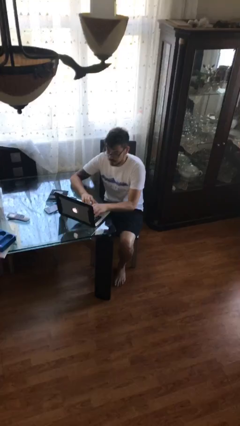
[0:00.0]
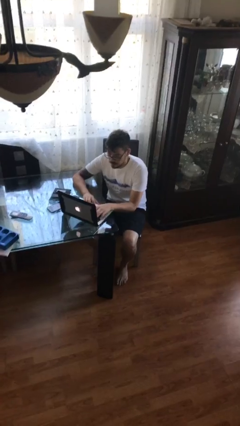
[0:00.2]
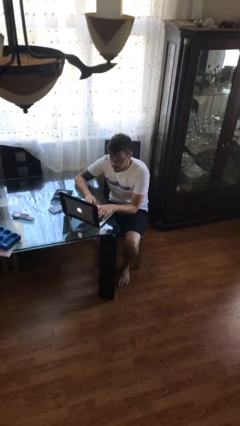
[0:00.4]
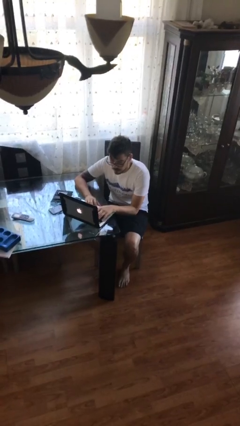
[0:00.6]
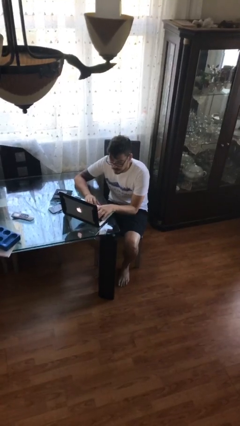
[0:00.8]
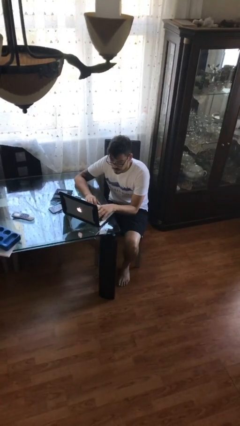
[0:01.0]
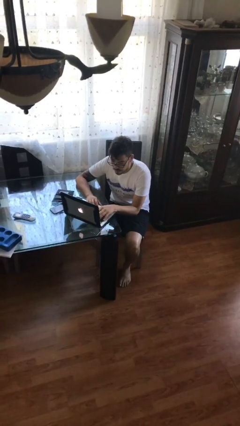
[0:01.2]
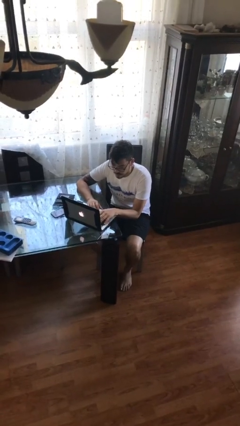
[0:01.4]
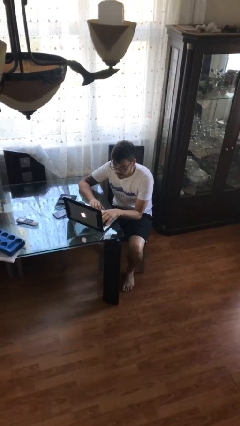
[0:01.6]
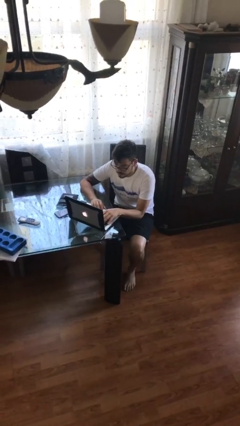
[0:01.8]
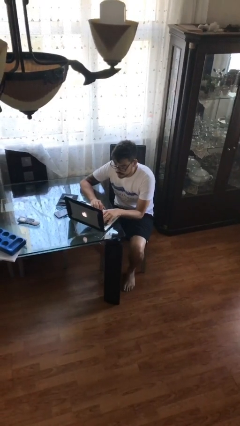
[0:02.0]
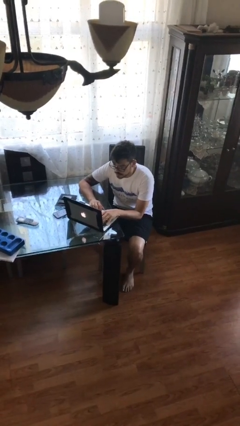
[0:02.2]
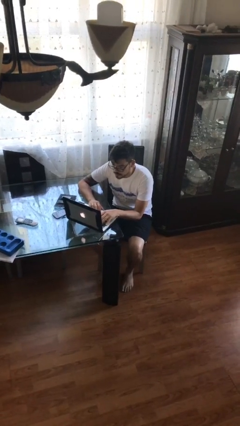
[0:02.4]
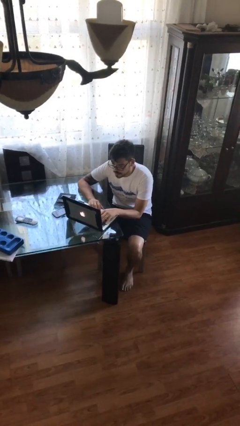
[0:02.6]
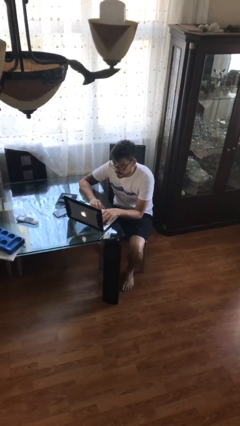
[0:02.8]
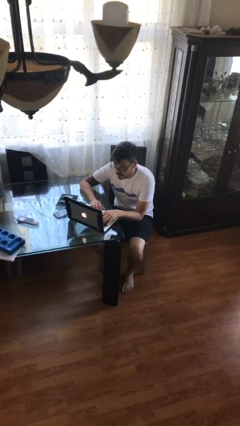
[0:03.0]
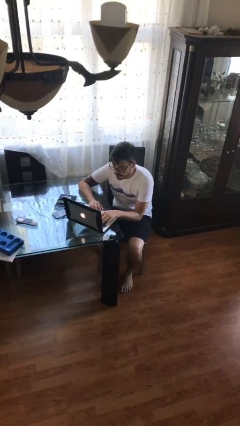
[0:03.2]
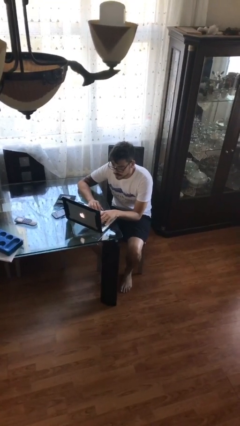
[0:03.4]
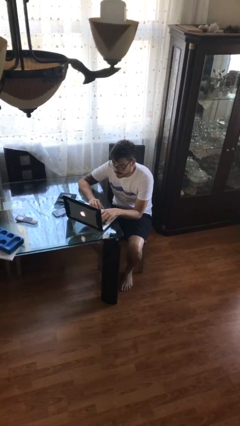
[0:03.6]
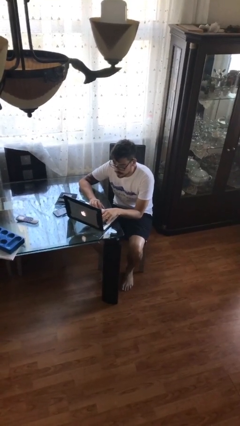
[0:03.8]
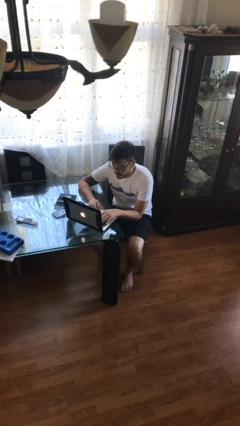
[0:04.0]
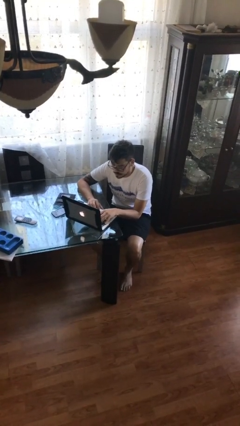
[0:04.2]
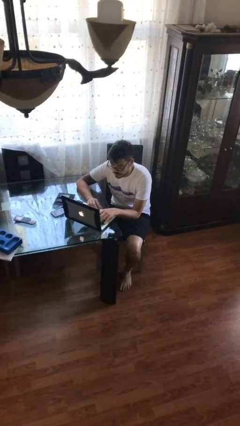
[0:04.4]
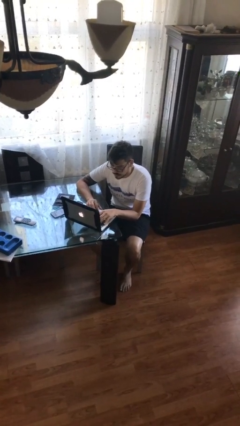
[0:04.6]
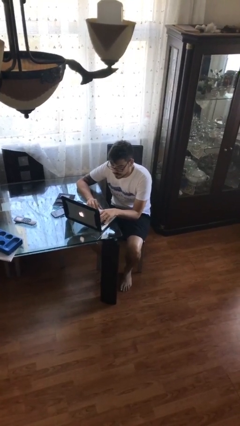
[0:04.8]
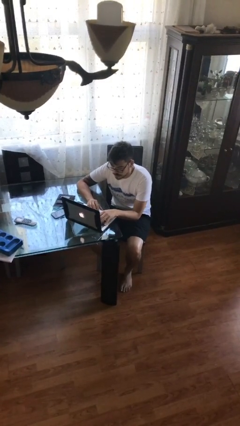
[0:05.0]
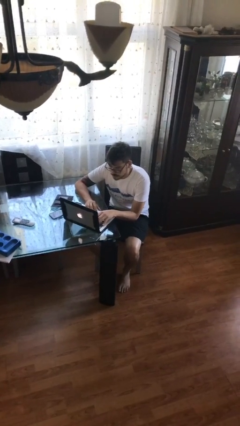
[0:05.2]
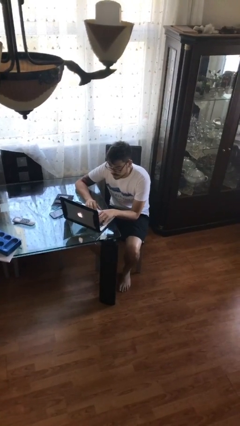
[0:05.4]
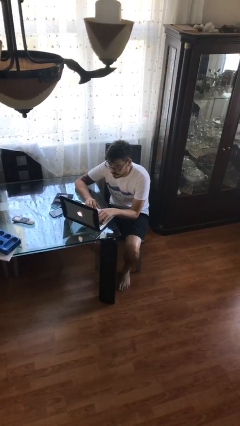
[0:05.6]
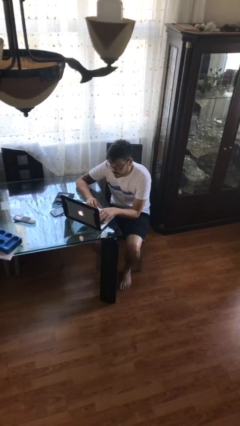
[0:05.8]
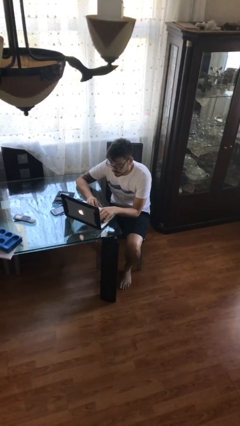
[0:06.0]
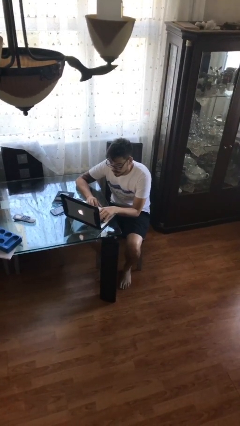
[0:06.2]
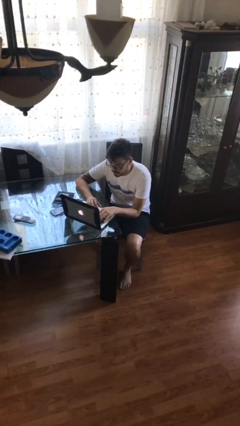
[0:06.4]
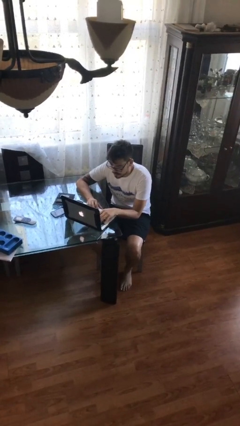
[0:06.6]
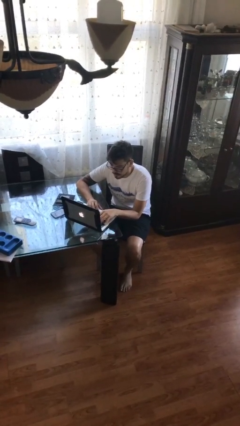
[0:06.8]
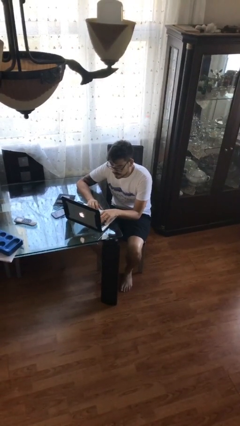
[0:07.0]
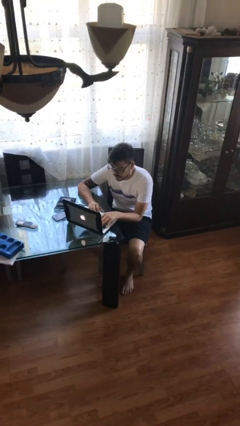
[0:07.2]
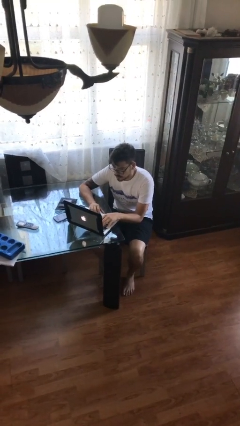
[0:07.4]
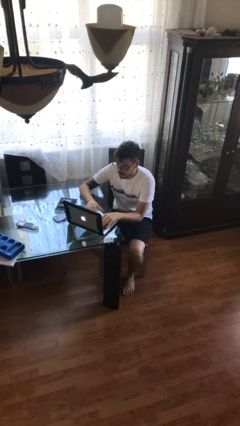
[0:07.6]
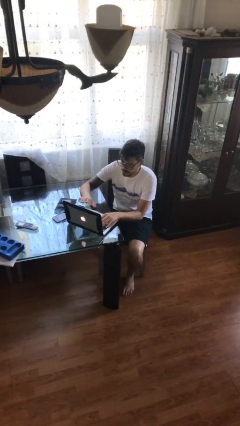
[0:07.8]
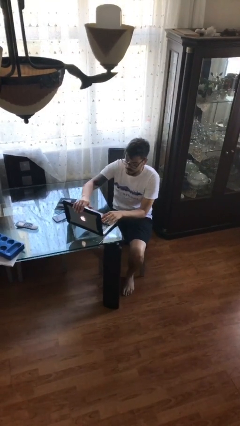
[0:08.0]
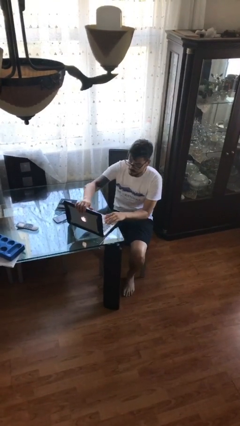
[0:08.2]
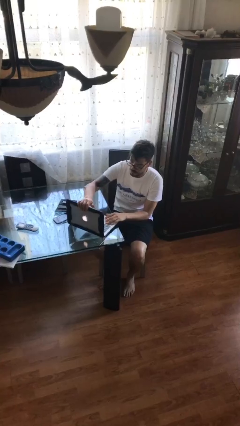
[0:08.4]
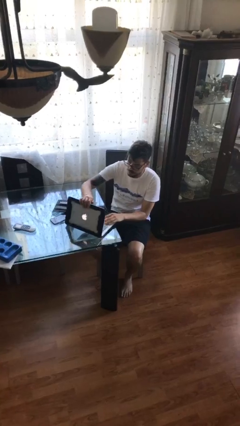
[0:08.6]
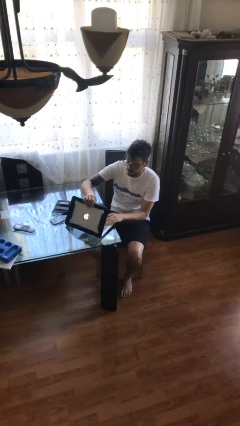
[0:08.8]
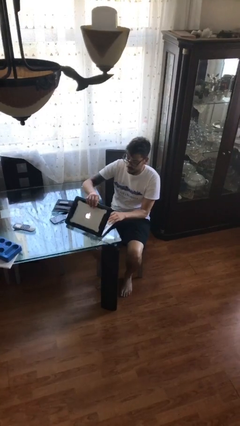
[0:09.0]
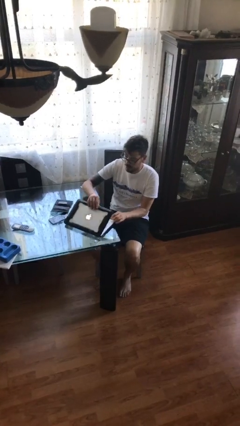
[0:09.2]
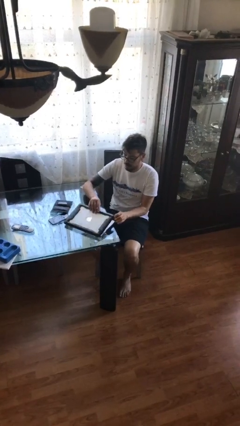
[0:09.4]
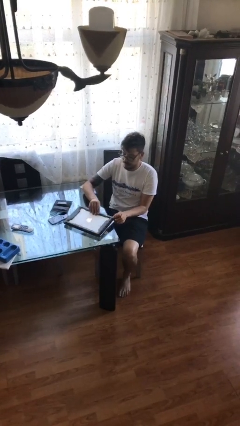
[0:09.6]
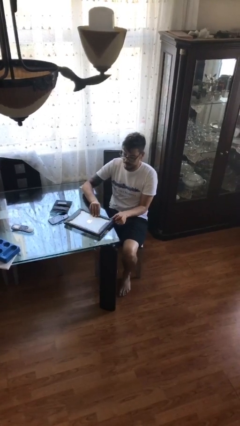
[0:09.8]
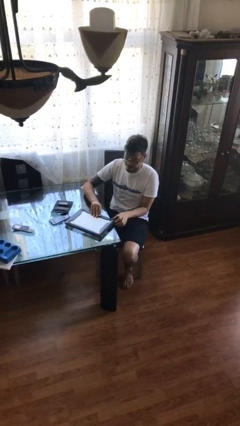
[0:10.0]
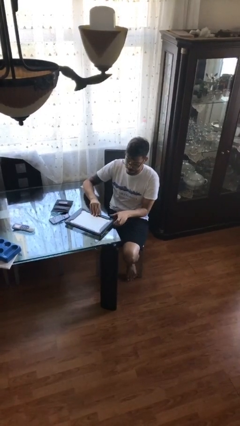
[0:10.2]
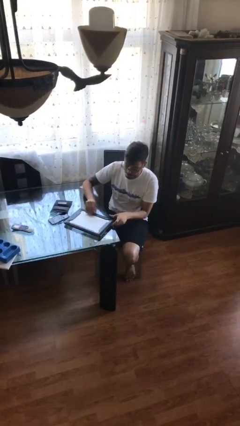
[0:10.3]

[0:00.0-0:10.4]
person interacts with laptop

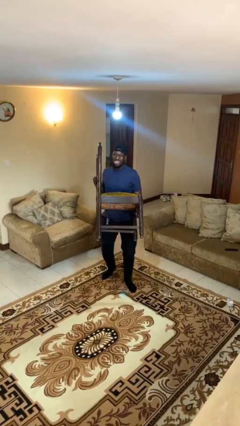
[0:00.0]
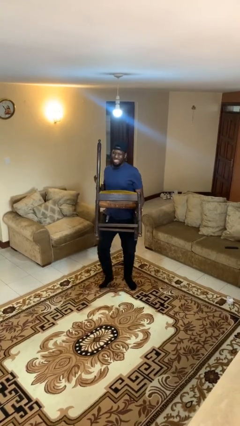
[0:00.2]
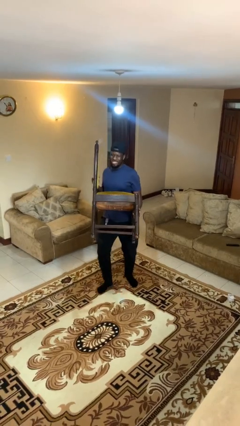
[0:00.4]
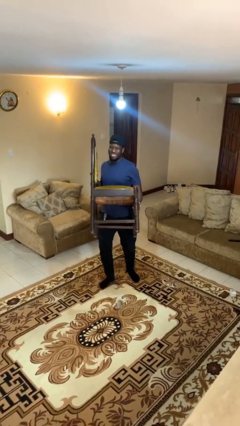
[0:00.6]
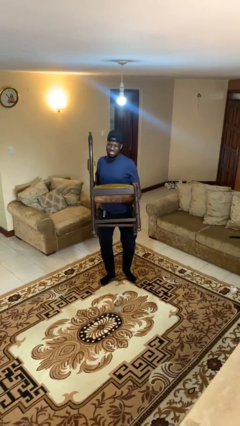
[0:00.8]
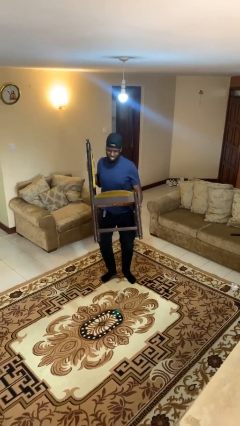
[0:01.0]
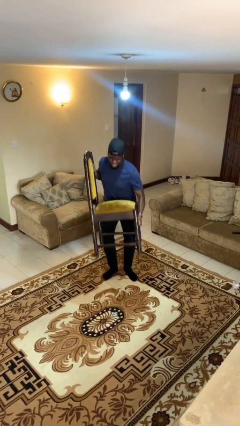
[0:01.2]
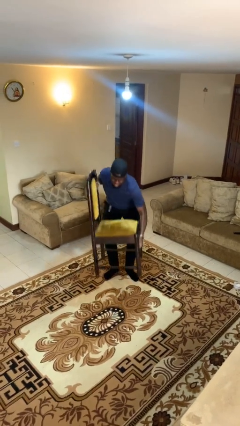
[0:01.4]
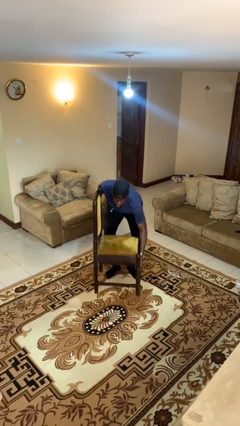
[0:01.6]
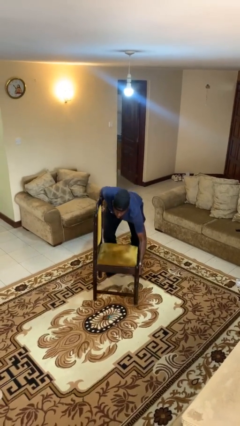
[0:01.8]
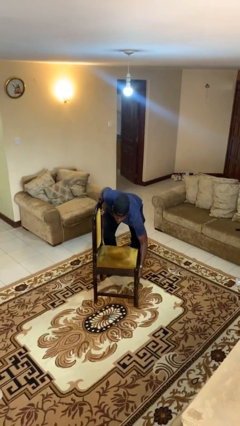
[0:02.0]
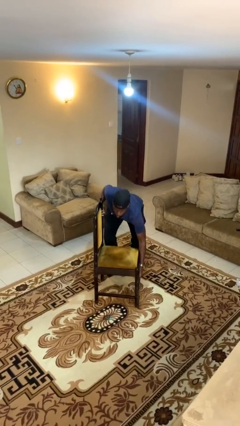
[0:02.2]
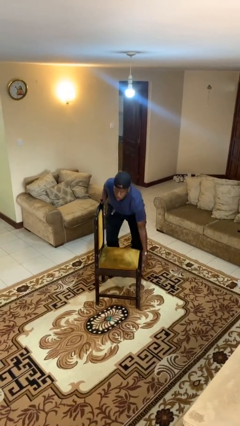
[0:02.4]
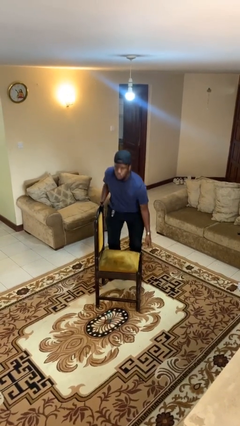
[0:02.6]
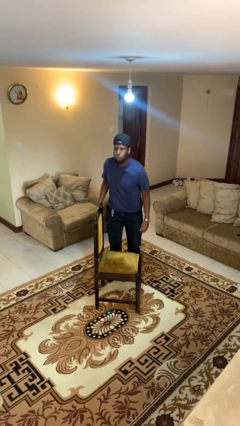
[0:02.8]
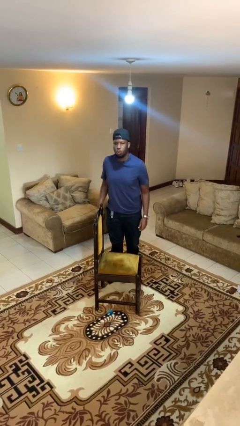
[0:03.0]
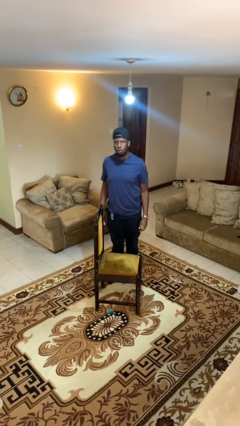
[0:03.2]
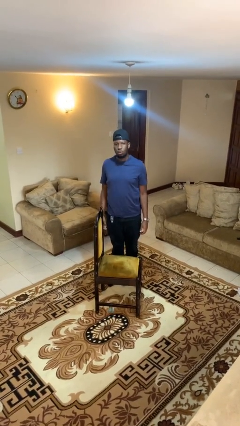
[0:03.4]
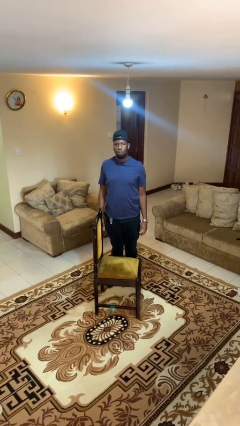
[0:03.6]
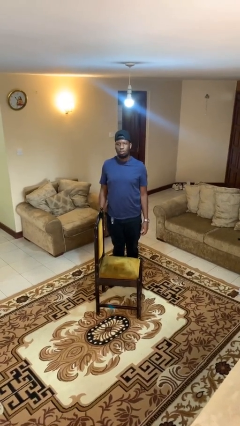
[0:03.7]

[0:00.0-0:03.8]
person puts down object on floor

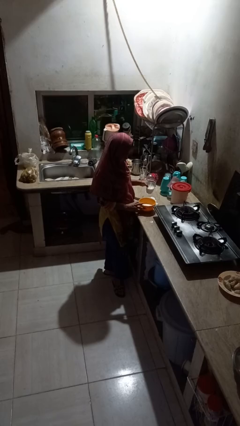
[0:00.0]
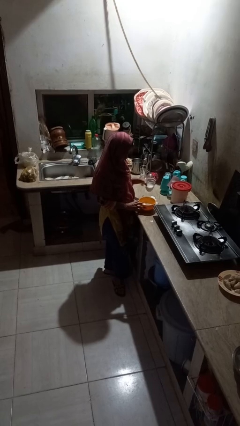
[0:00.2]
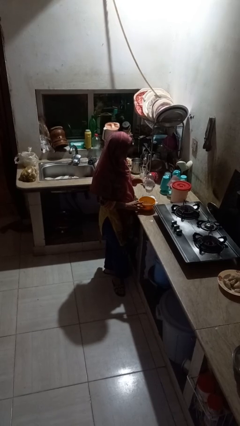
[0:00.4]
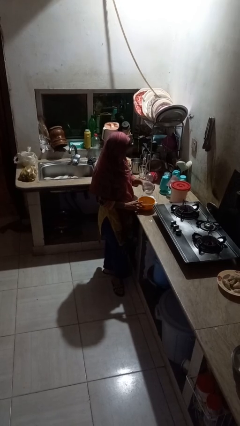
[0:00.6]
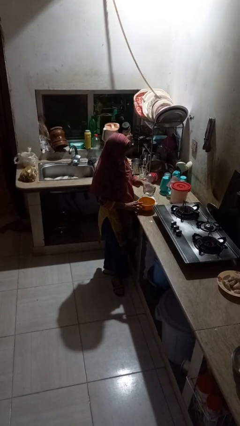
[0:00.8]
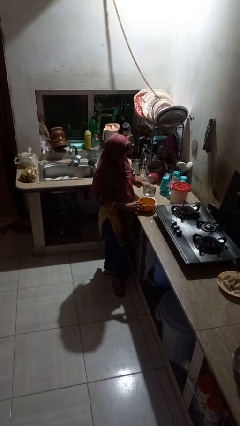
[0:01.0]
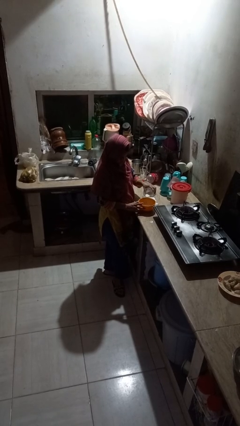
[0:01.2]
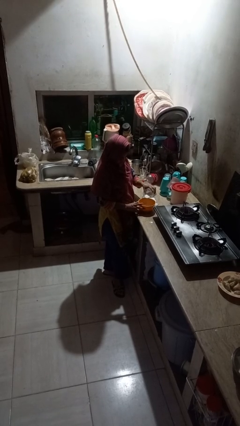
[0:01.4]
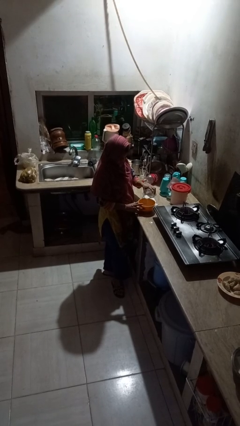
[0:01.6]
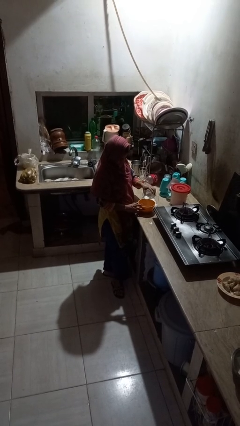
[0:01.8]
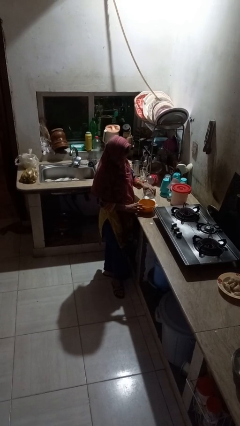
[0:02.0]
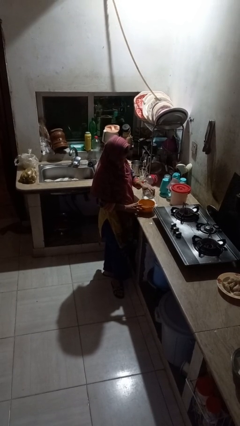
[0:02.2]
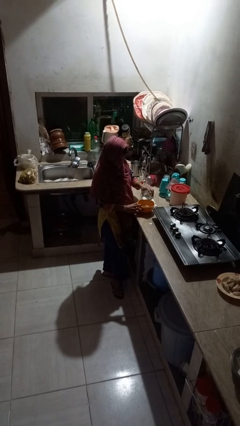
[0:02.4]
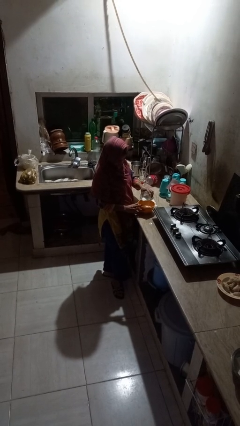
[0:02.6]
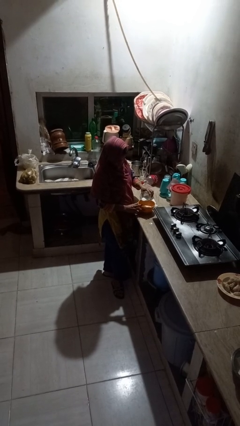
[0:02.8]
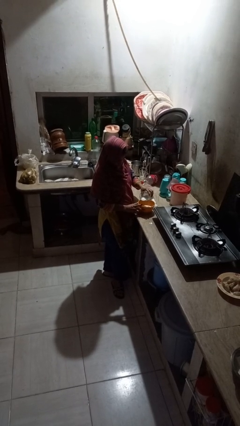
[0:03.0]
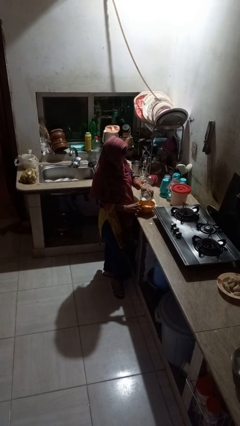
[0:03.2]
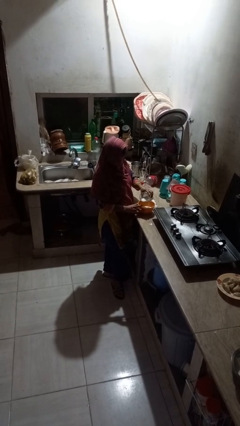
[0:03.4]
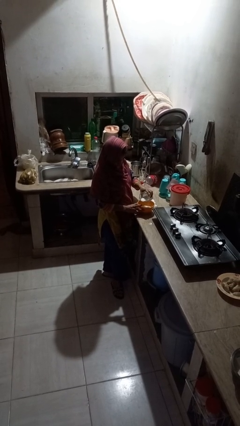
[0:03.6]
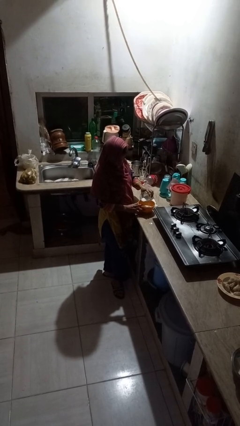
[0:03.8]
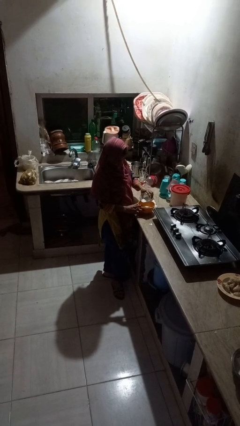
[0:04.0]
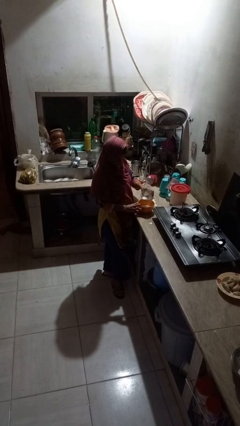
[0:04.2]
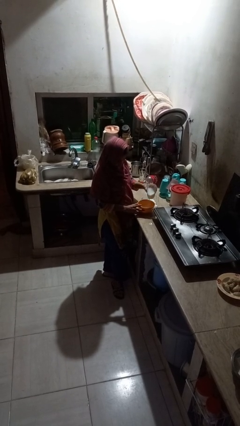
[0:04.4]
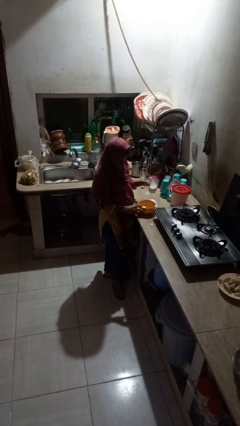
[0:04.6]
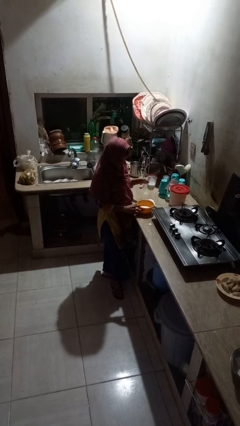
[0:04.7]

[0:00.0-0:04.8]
person pours into bowl
